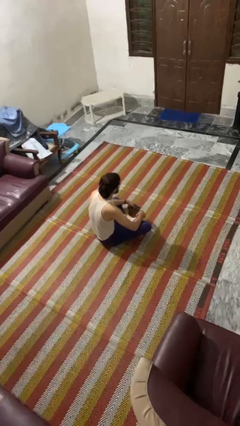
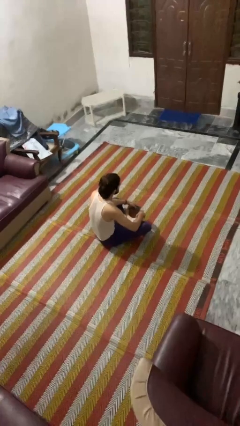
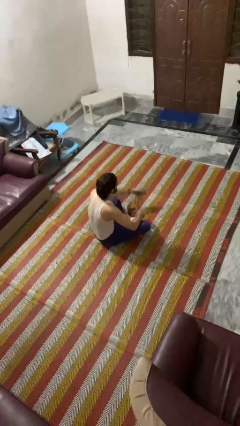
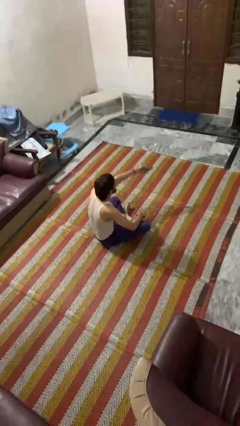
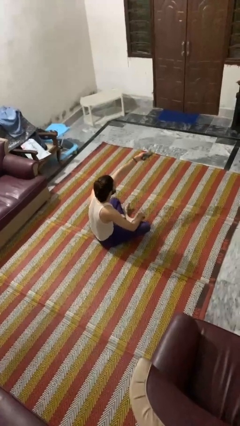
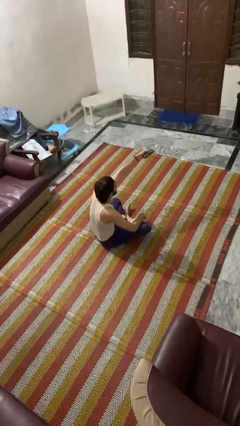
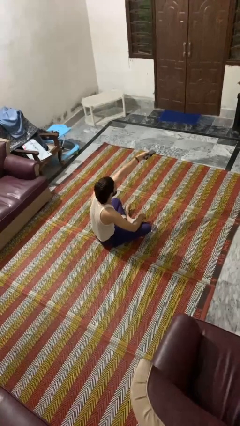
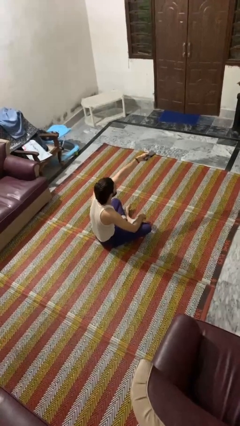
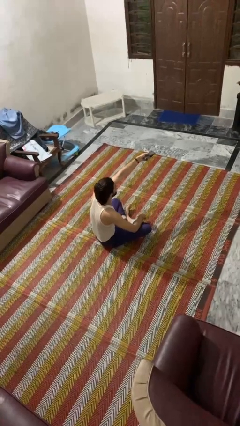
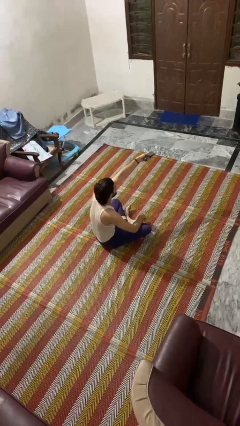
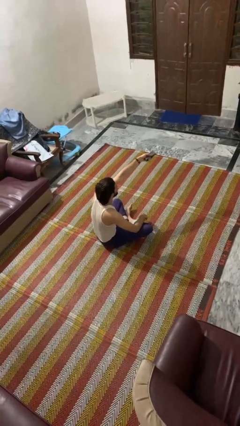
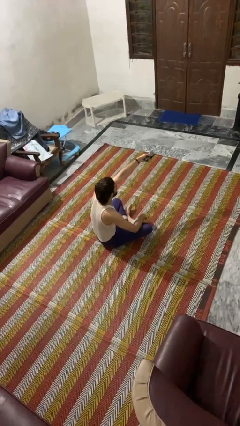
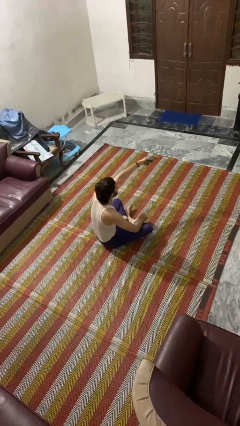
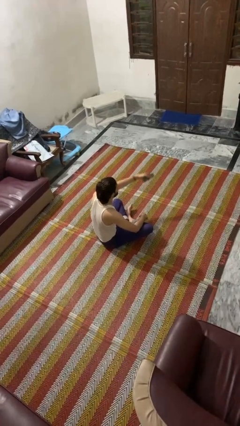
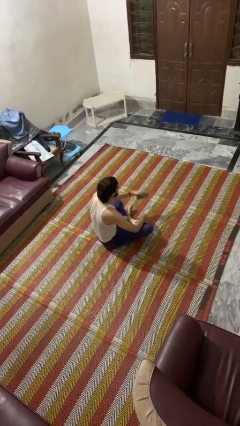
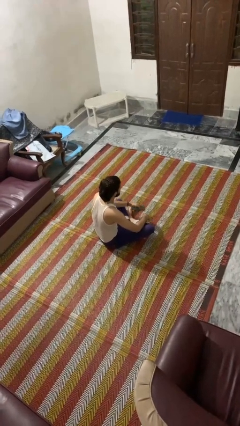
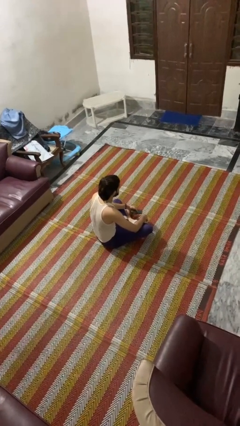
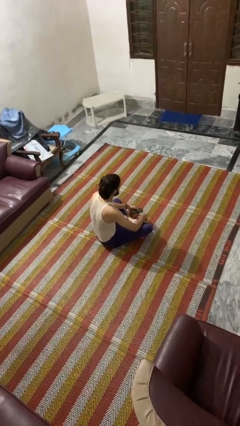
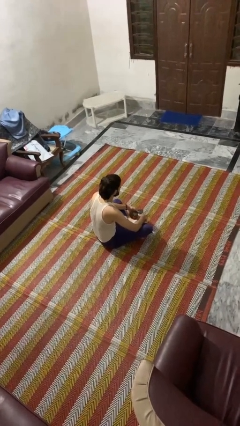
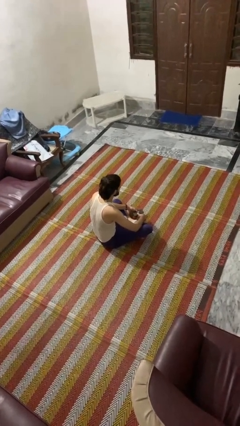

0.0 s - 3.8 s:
person uses television remote

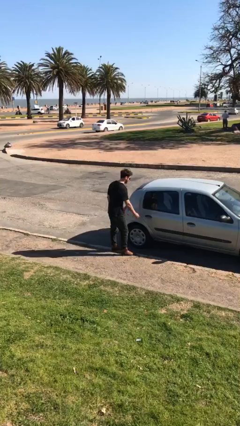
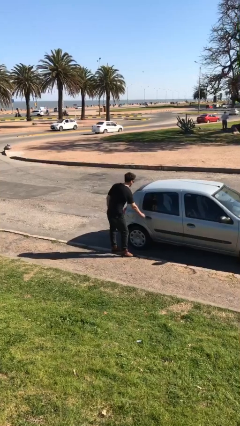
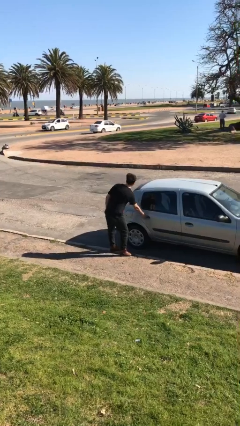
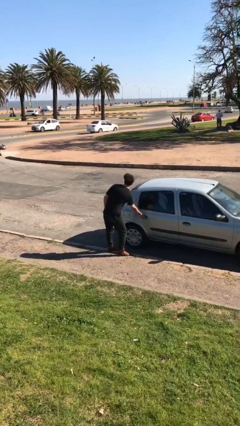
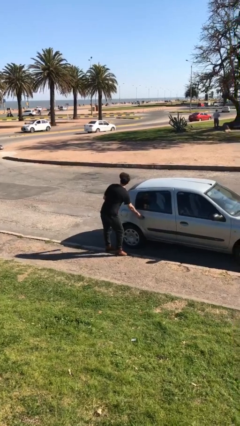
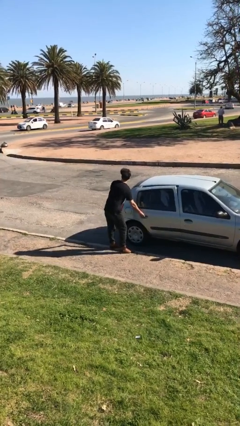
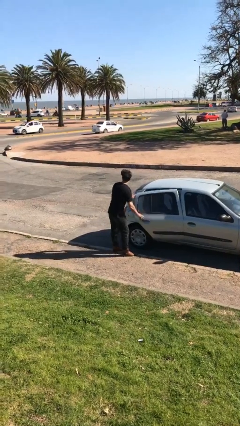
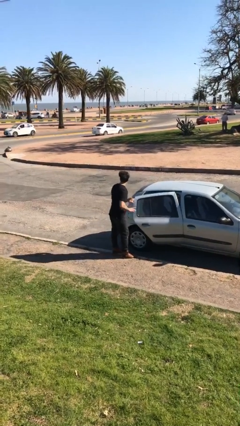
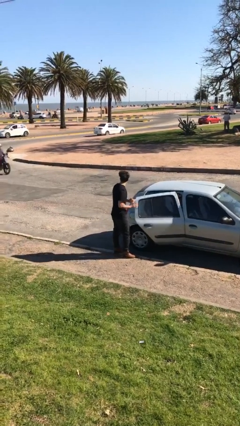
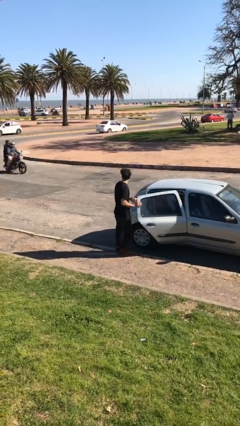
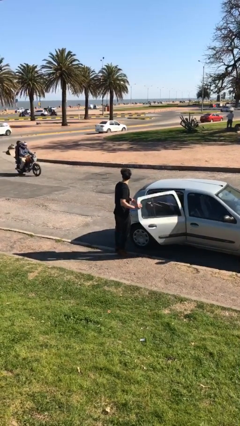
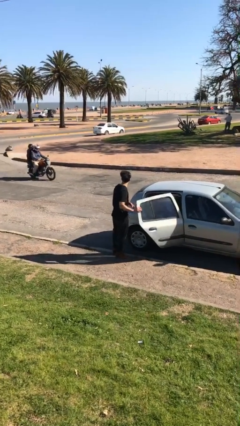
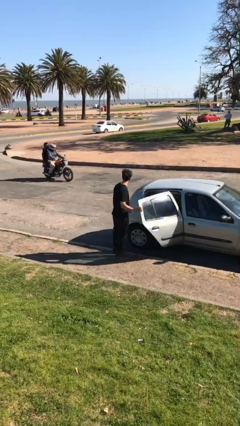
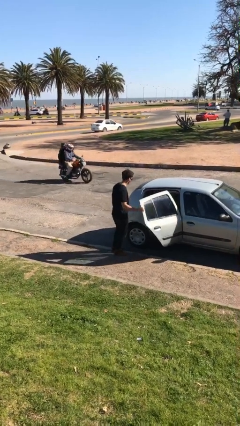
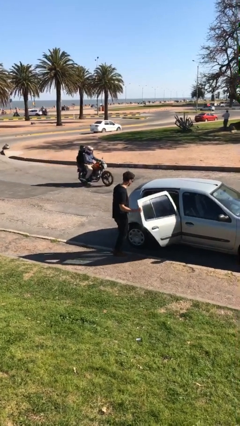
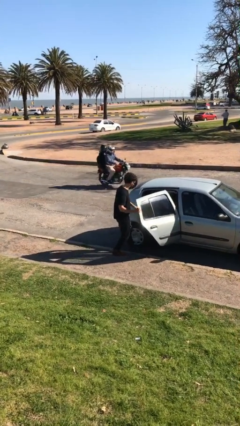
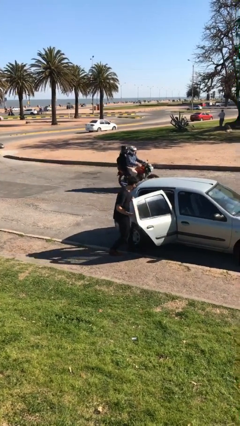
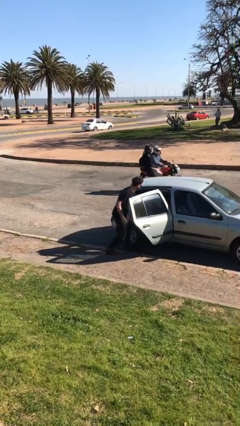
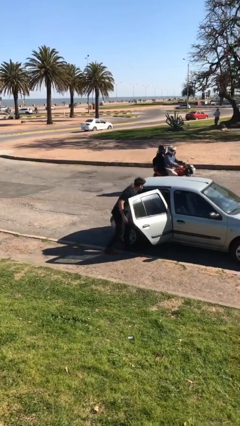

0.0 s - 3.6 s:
person opens car door

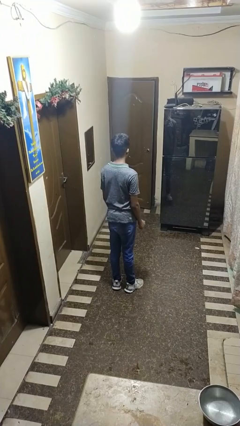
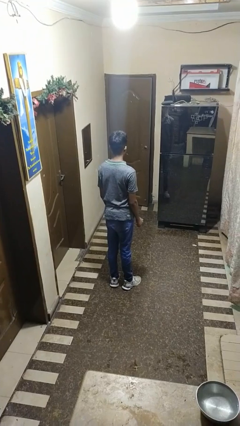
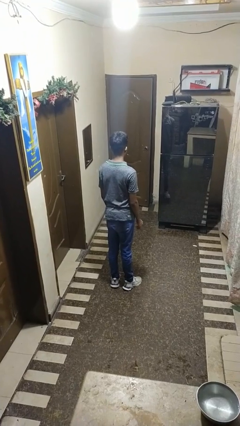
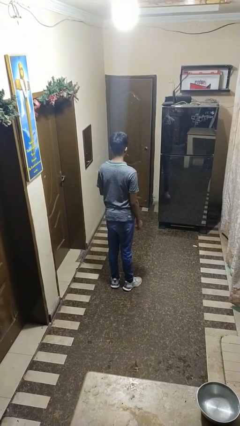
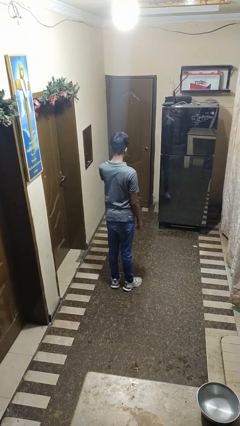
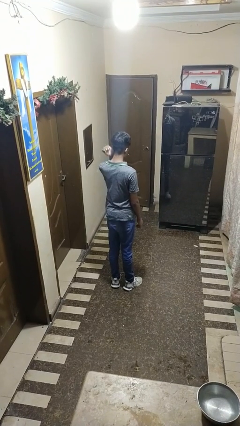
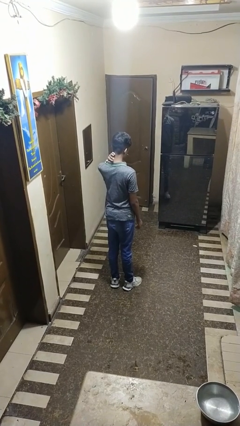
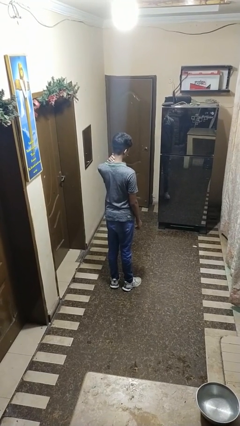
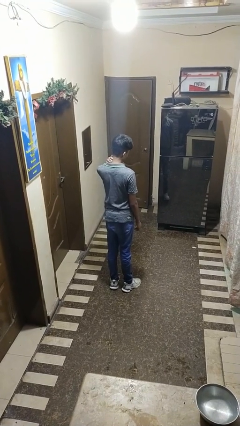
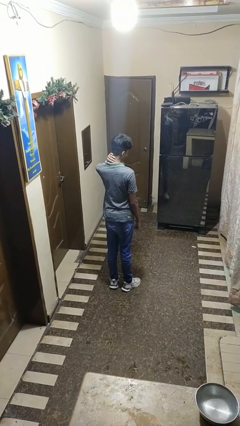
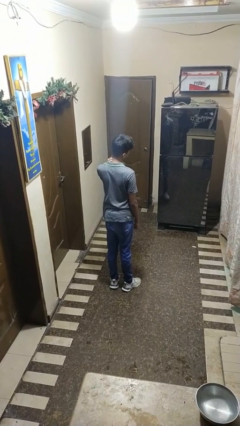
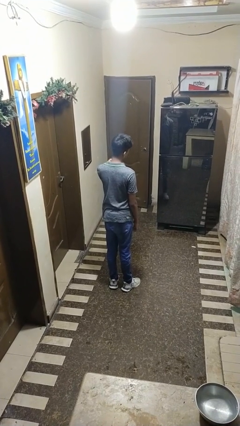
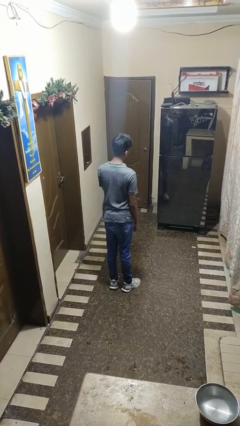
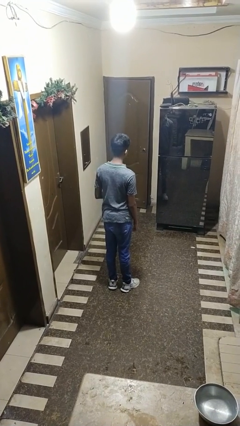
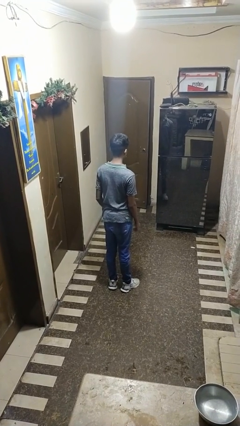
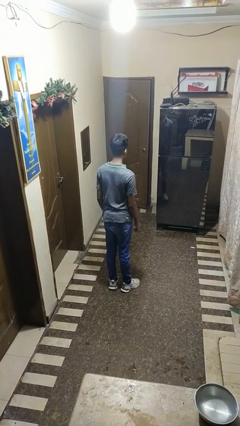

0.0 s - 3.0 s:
person rubs neck

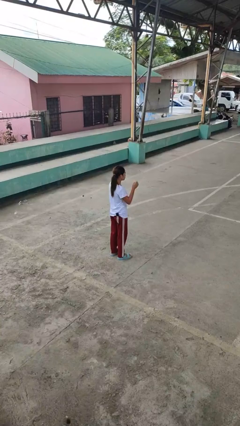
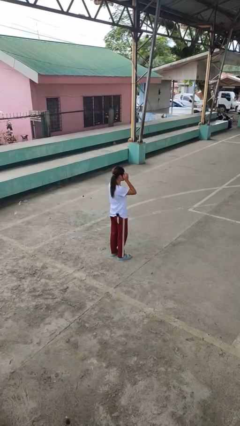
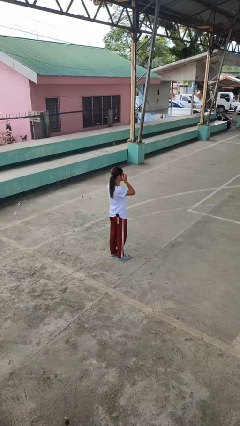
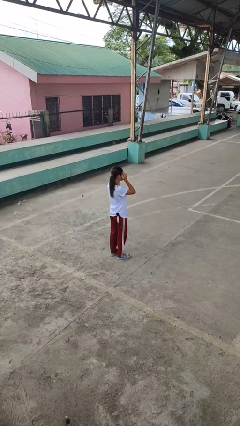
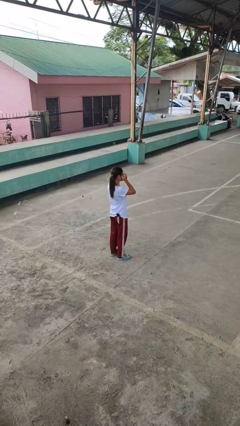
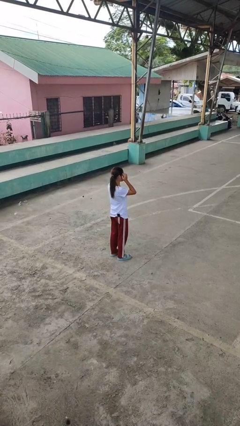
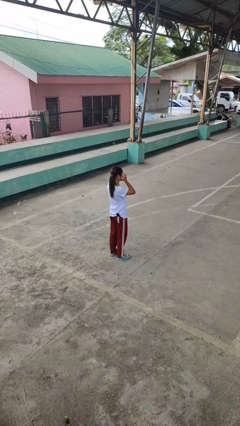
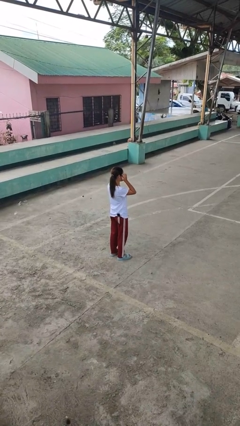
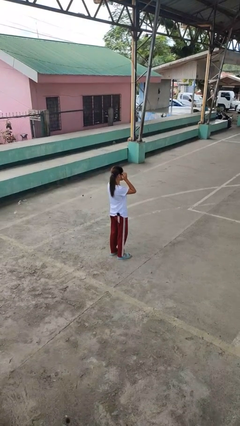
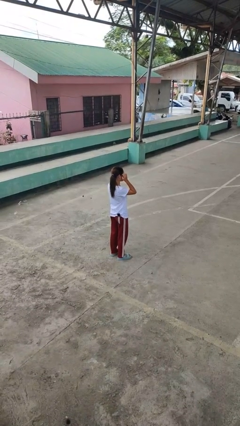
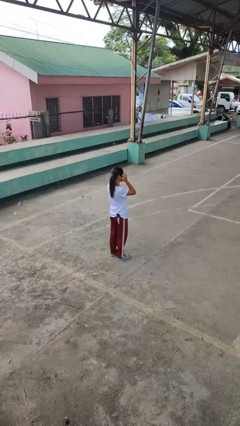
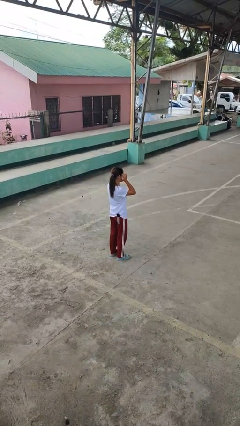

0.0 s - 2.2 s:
person scratches face

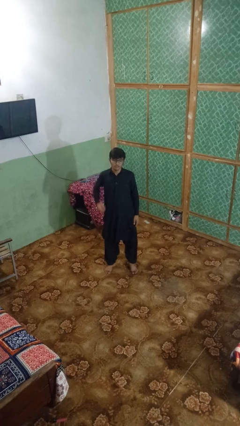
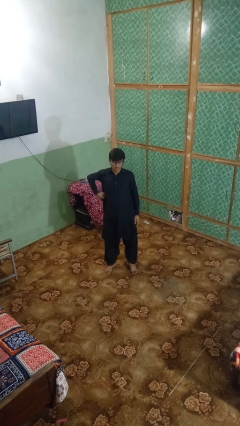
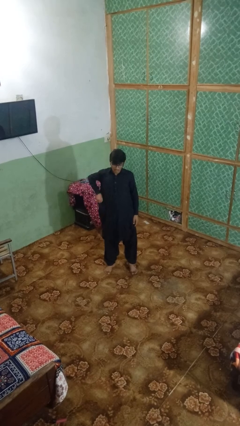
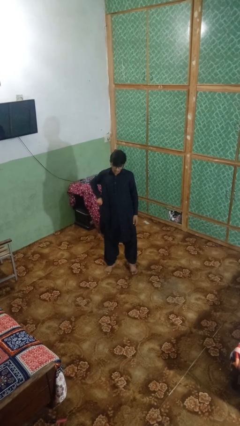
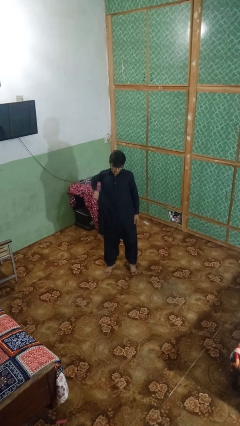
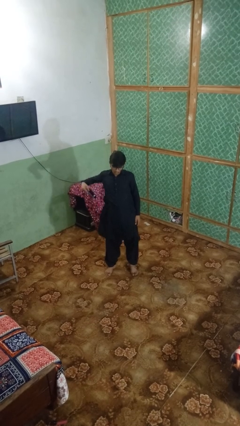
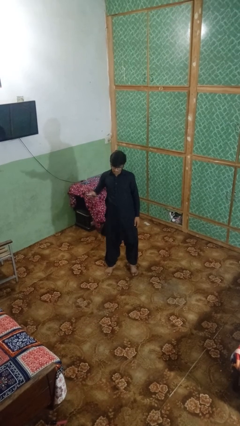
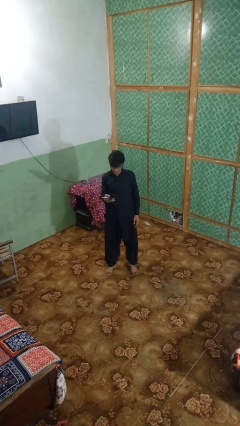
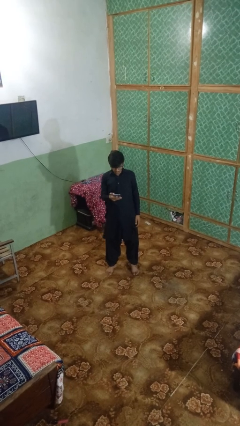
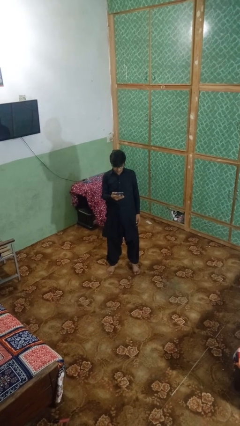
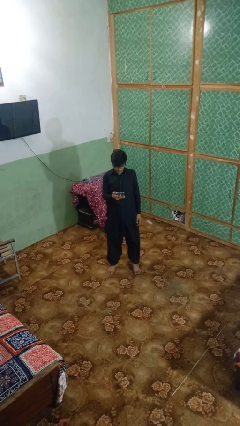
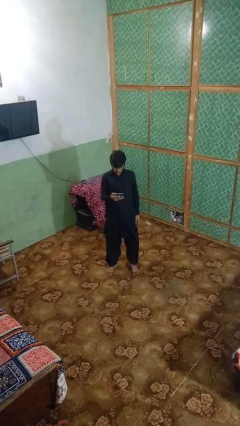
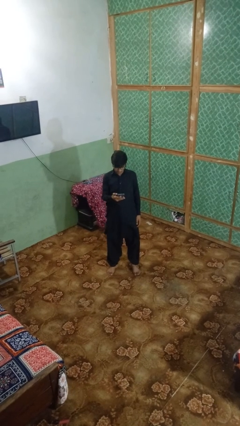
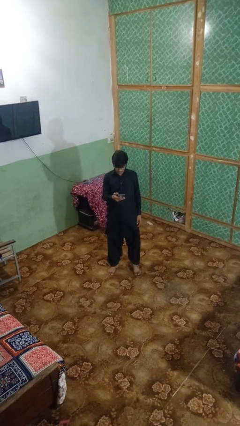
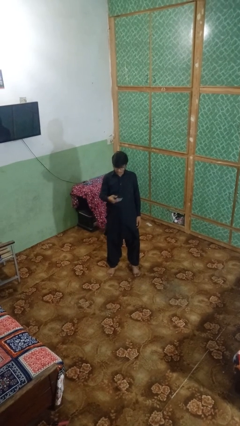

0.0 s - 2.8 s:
person takes phone from pocket

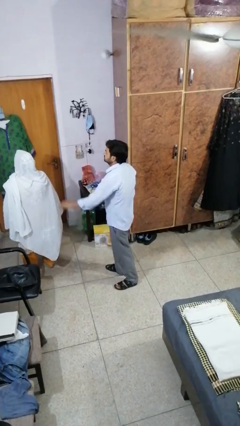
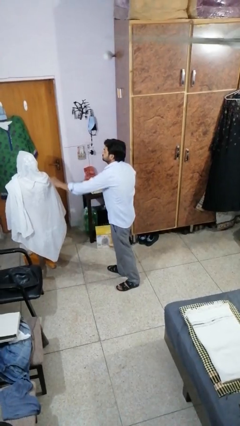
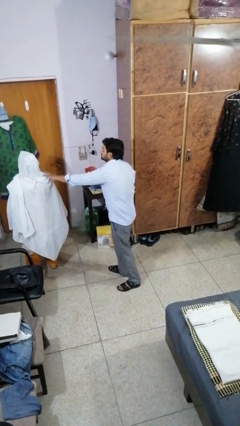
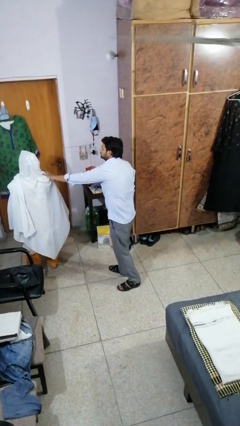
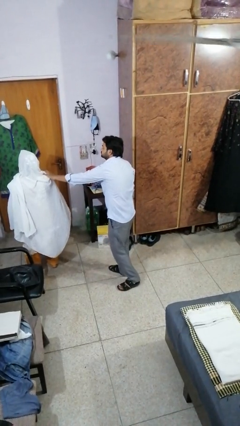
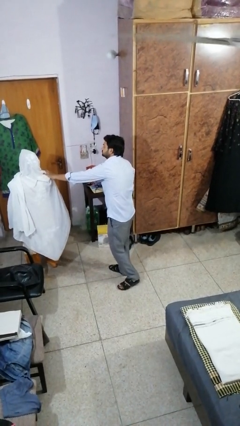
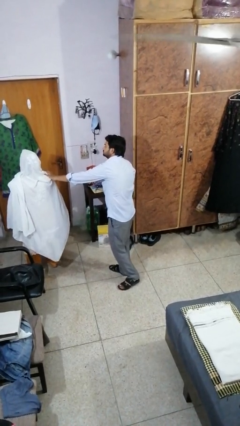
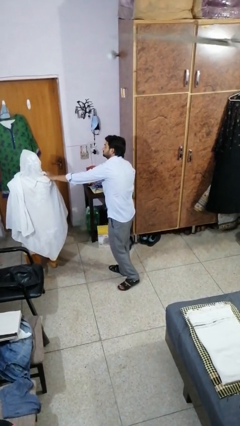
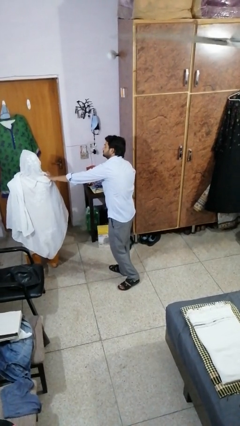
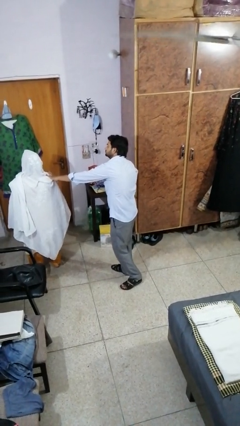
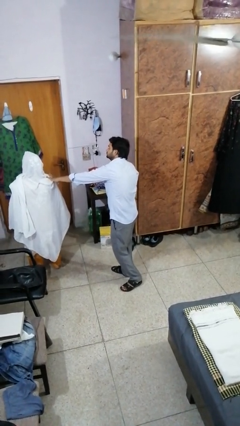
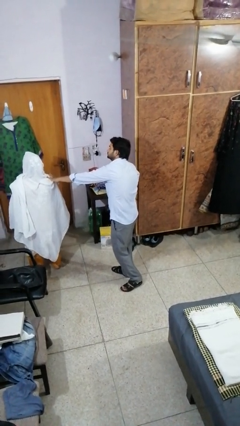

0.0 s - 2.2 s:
person touches back of person
